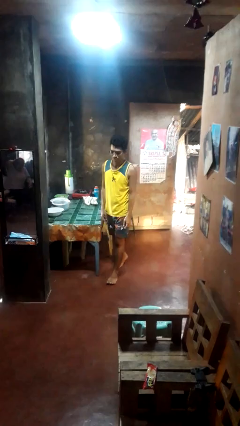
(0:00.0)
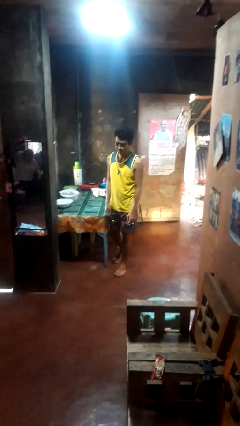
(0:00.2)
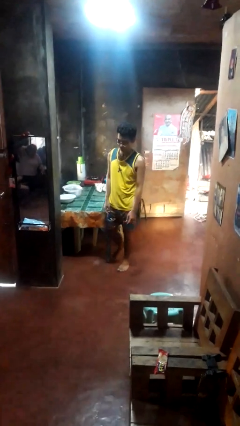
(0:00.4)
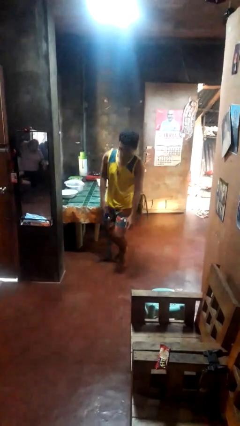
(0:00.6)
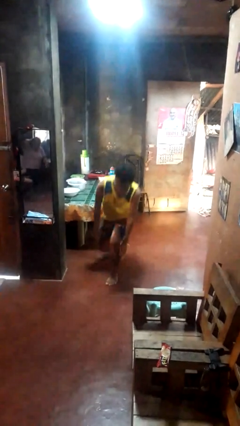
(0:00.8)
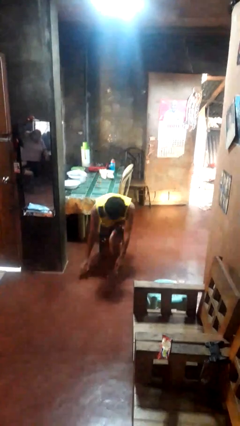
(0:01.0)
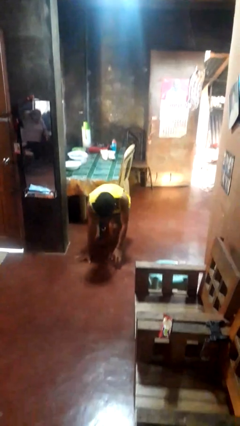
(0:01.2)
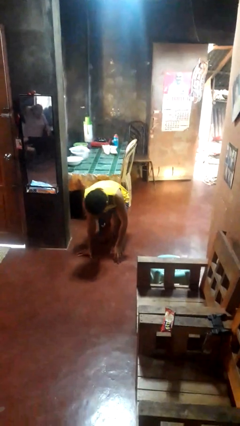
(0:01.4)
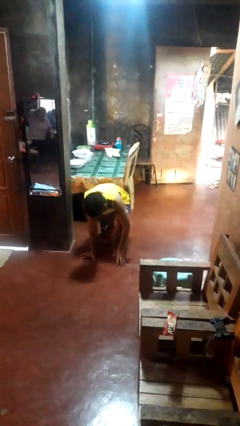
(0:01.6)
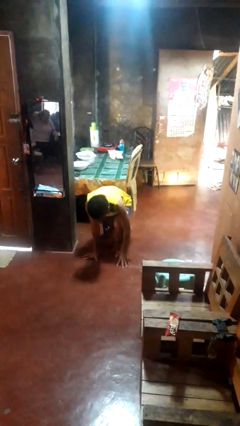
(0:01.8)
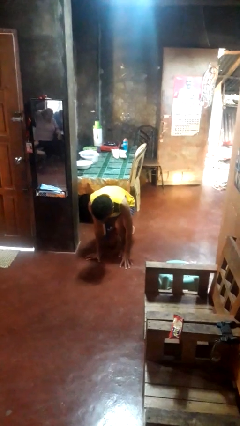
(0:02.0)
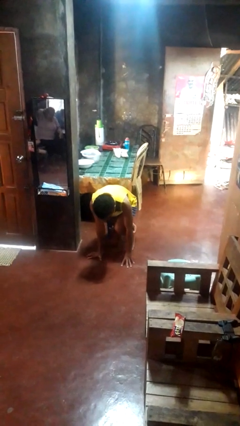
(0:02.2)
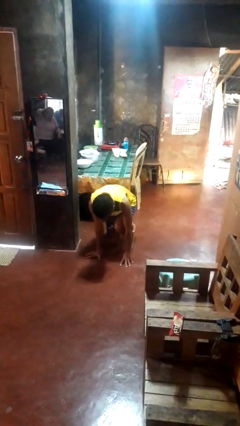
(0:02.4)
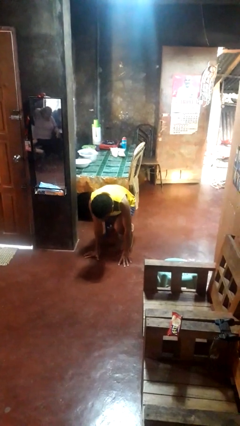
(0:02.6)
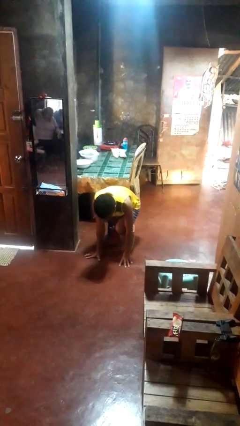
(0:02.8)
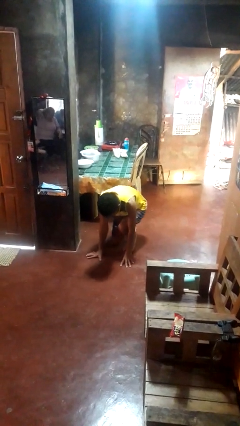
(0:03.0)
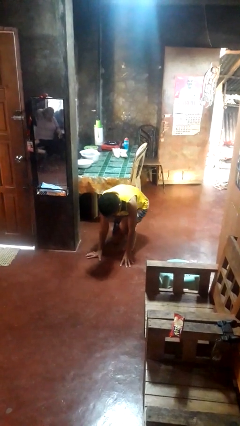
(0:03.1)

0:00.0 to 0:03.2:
person trips on object on floor

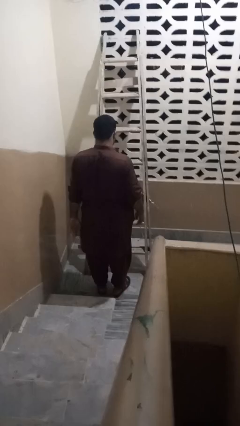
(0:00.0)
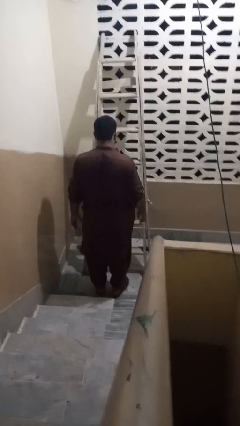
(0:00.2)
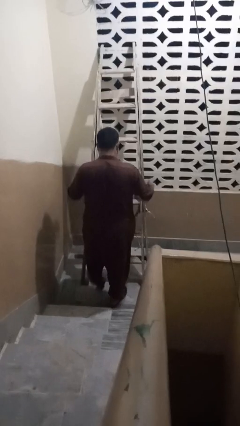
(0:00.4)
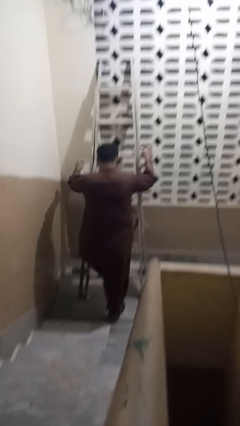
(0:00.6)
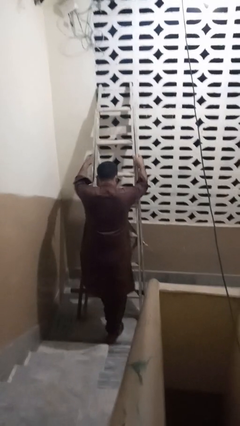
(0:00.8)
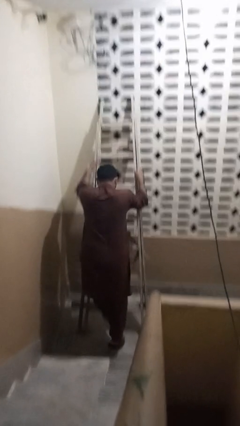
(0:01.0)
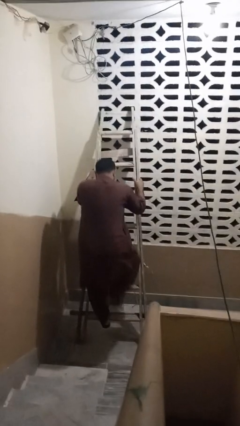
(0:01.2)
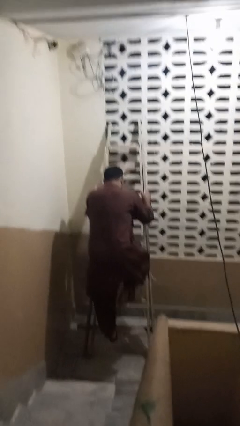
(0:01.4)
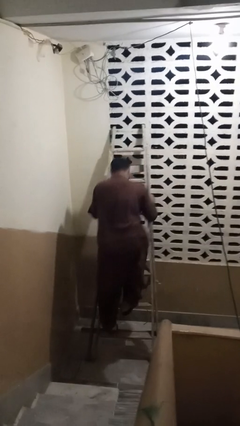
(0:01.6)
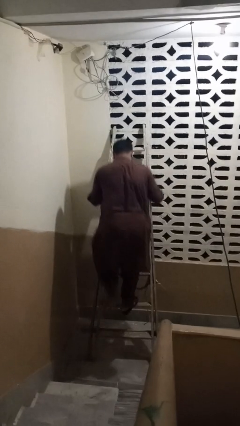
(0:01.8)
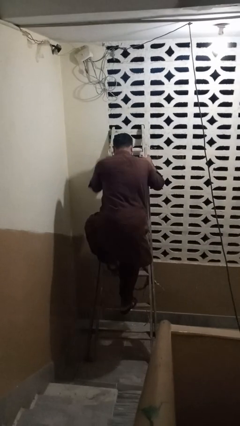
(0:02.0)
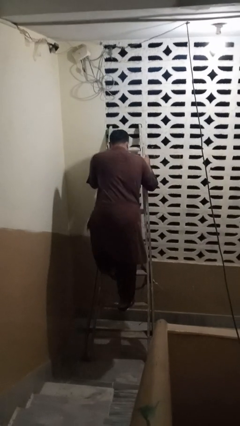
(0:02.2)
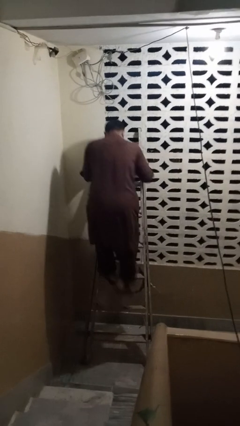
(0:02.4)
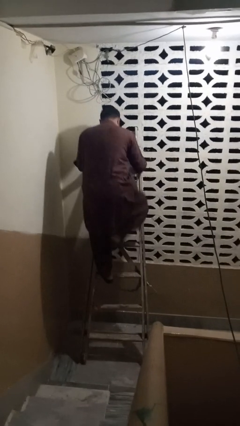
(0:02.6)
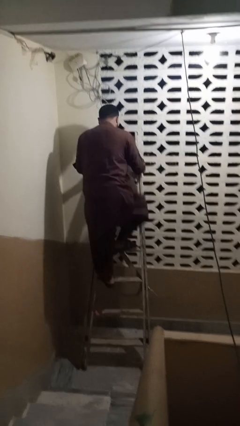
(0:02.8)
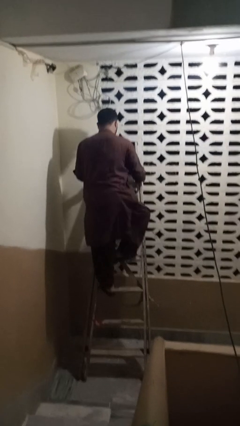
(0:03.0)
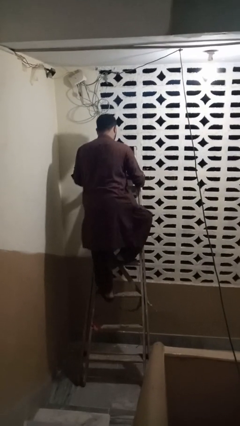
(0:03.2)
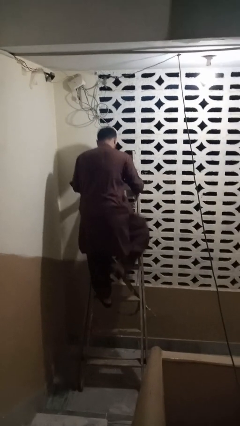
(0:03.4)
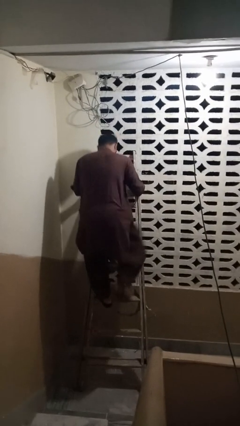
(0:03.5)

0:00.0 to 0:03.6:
person climbs up ladder

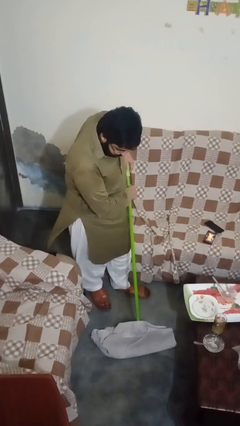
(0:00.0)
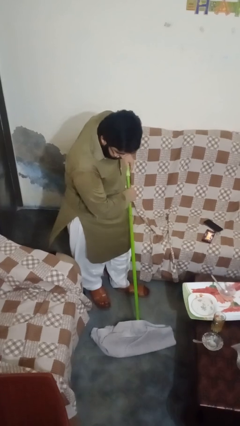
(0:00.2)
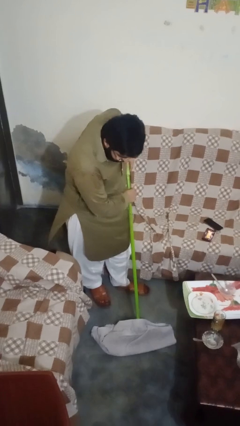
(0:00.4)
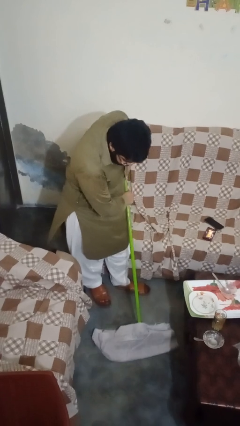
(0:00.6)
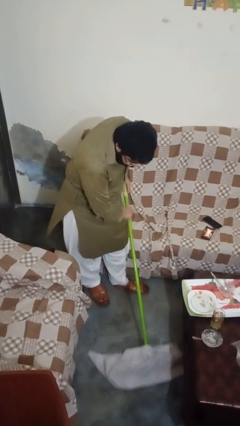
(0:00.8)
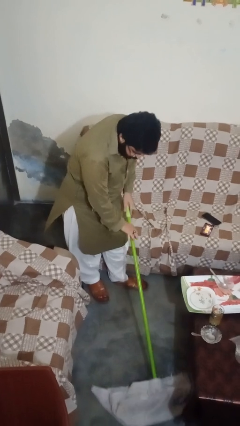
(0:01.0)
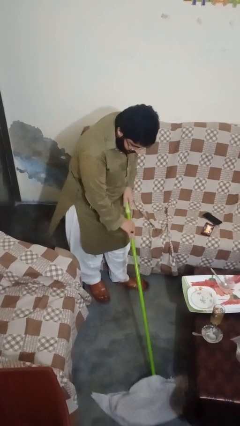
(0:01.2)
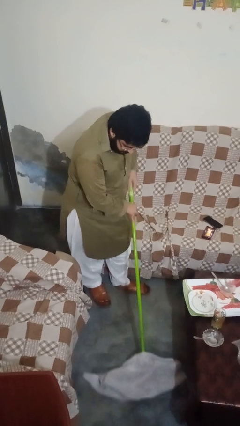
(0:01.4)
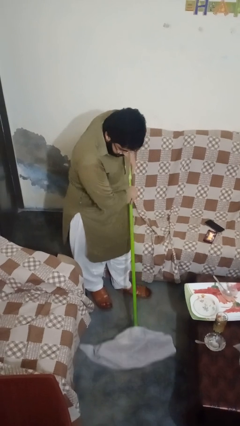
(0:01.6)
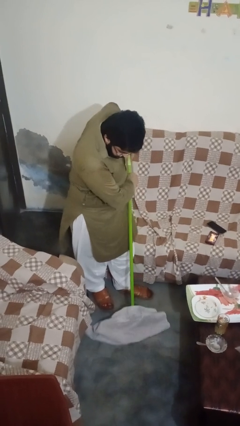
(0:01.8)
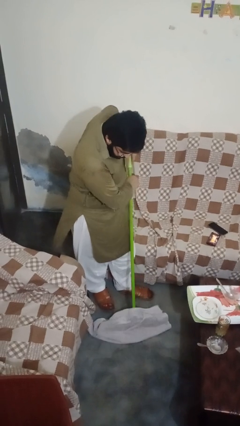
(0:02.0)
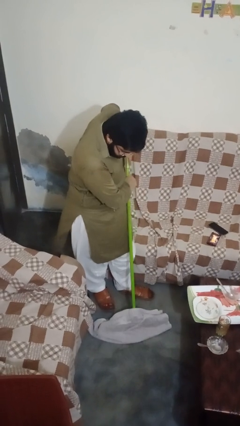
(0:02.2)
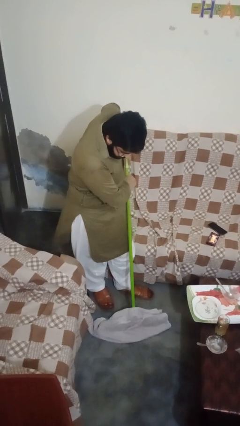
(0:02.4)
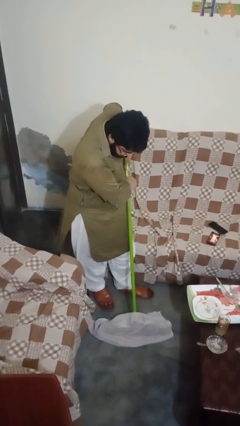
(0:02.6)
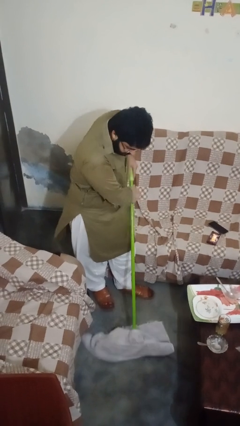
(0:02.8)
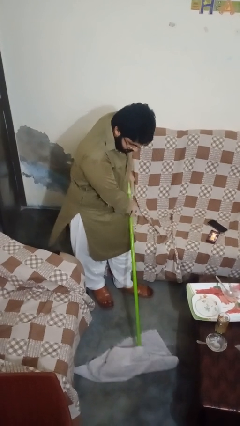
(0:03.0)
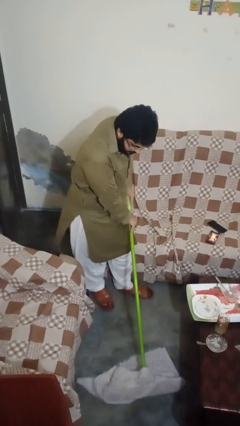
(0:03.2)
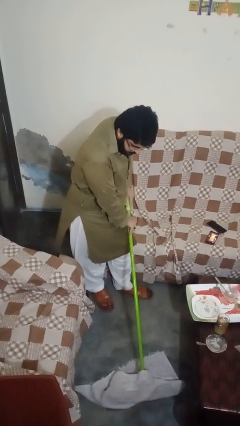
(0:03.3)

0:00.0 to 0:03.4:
person mops

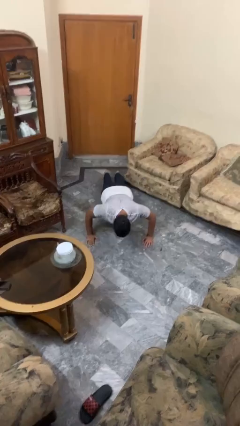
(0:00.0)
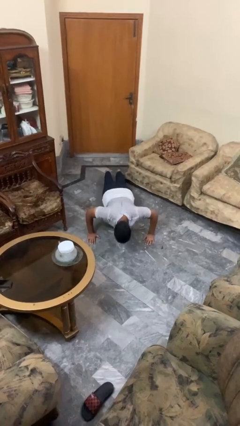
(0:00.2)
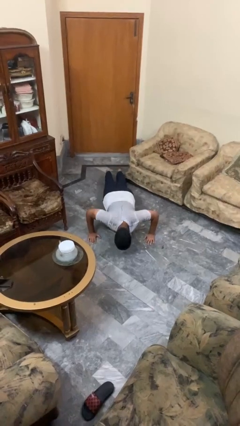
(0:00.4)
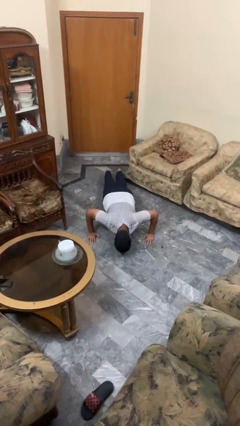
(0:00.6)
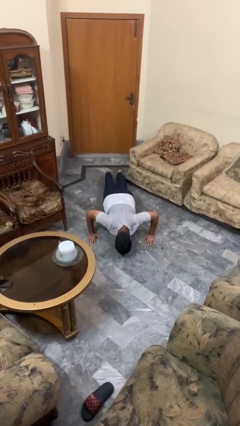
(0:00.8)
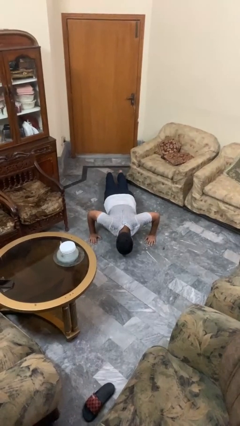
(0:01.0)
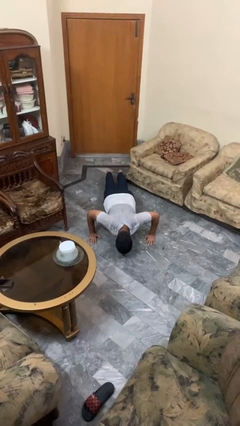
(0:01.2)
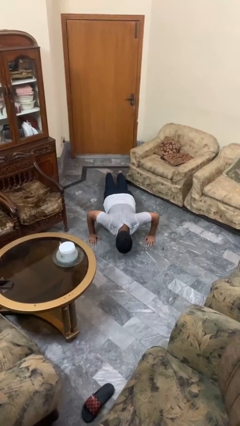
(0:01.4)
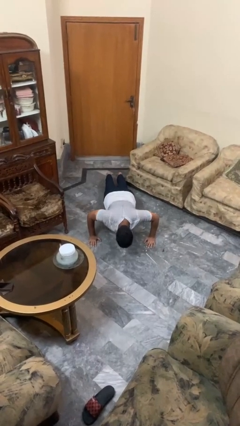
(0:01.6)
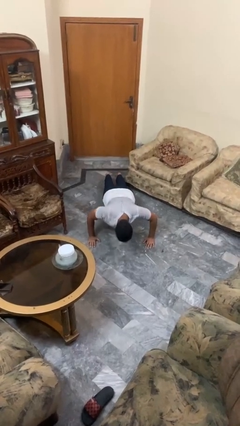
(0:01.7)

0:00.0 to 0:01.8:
person exercises with pushup

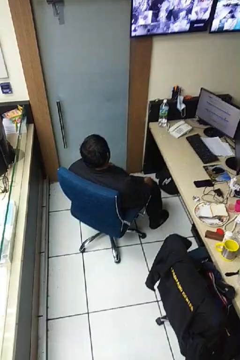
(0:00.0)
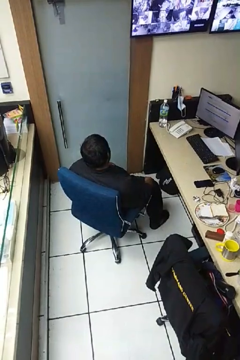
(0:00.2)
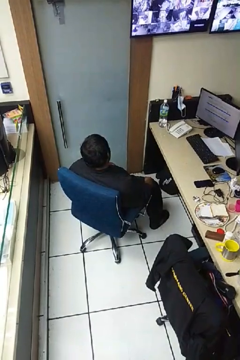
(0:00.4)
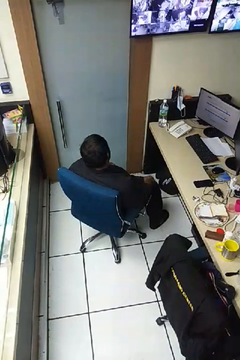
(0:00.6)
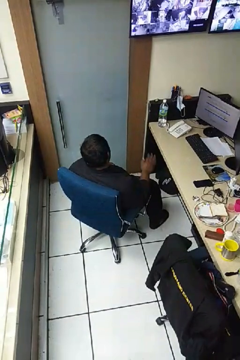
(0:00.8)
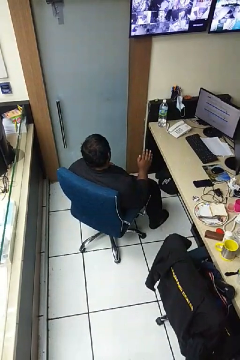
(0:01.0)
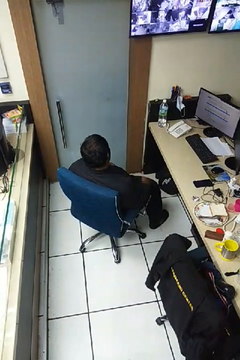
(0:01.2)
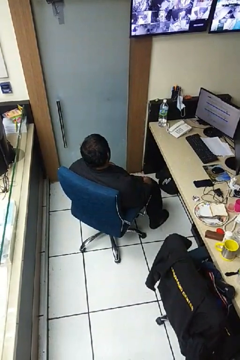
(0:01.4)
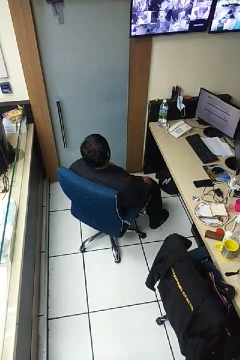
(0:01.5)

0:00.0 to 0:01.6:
person slaps hands on thighs

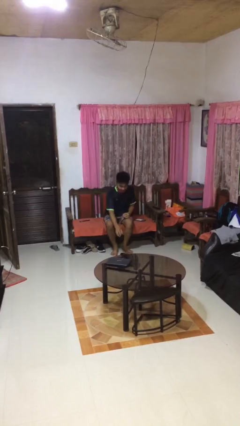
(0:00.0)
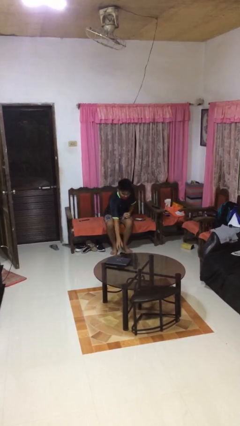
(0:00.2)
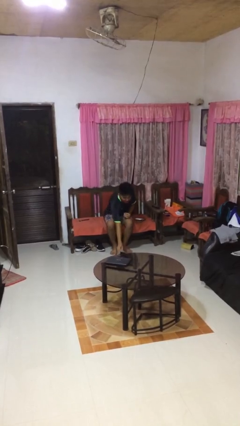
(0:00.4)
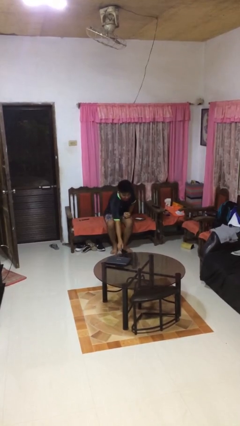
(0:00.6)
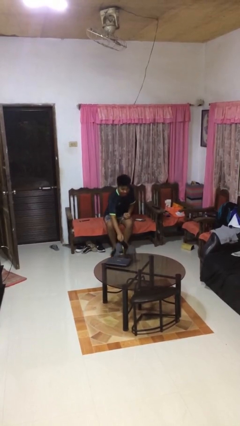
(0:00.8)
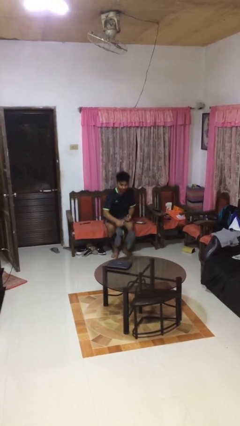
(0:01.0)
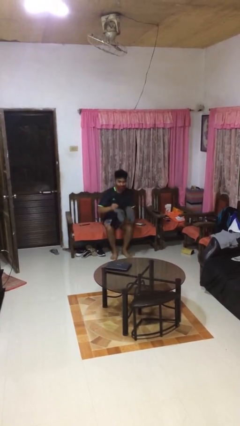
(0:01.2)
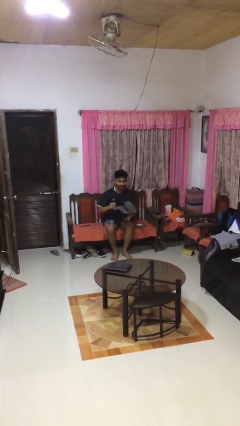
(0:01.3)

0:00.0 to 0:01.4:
person picks up object from floor

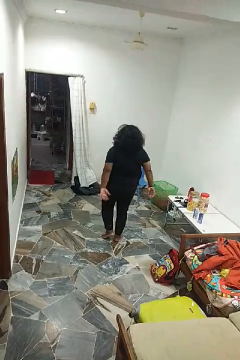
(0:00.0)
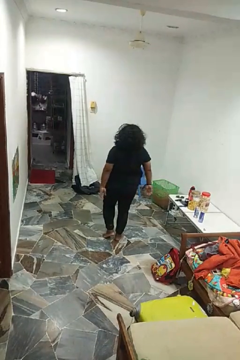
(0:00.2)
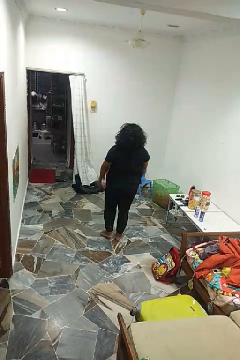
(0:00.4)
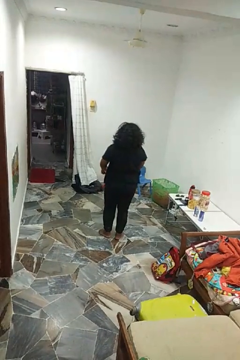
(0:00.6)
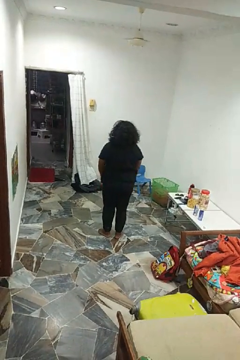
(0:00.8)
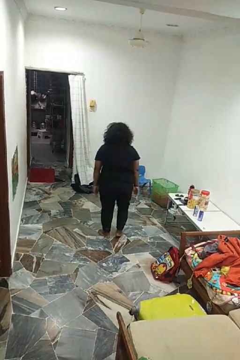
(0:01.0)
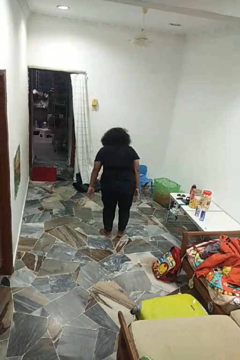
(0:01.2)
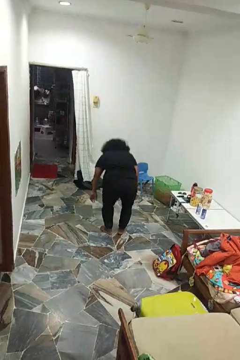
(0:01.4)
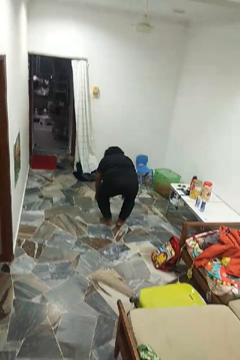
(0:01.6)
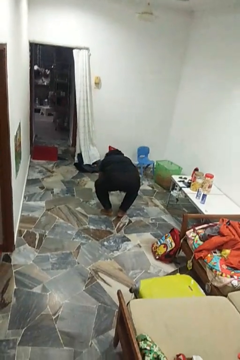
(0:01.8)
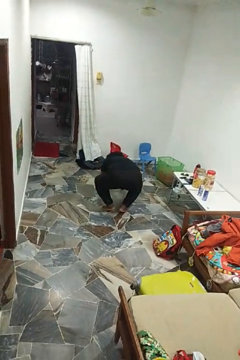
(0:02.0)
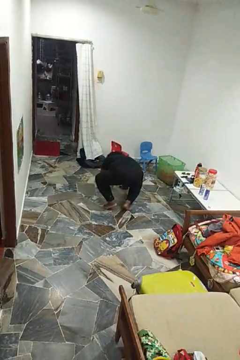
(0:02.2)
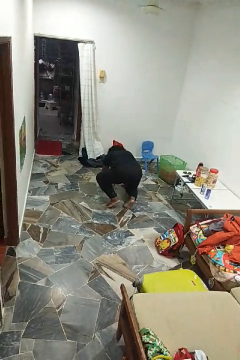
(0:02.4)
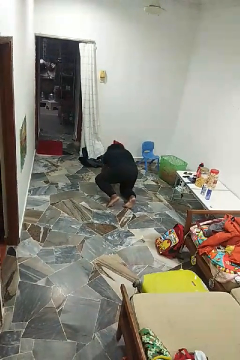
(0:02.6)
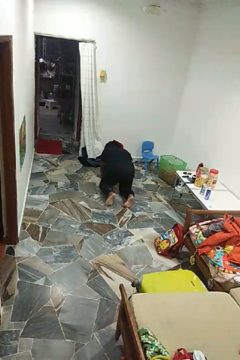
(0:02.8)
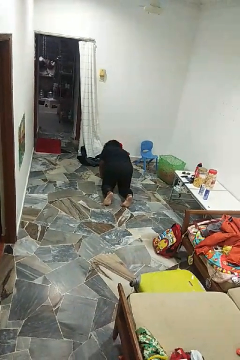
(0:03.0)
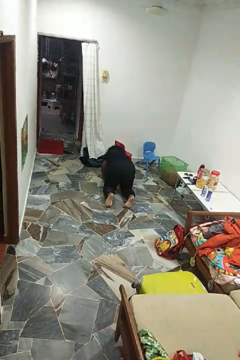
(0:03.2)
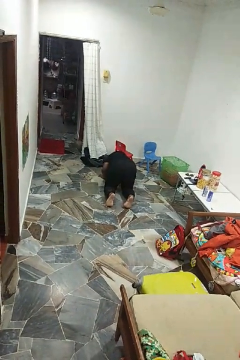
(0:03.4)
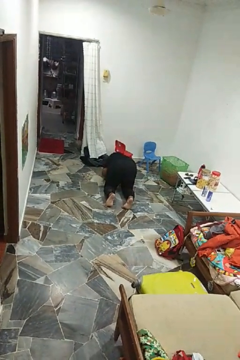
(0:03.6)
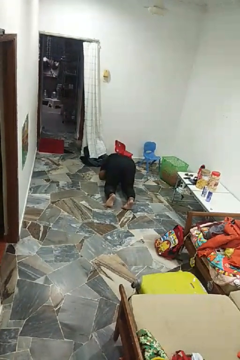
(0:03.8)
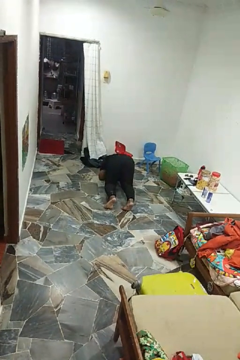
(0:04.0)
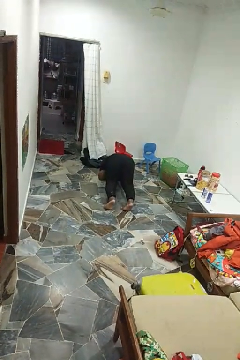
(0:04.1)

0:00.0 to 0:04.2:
person exercises with plank
